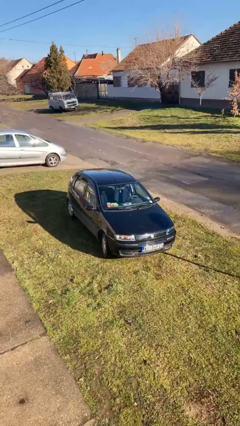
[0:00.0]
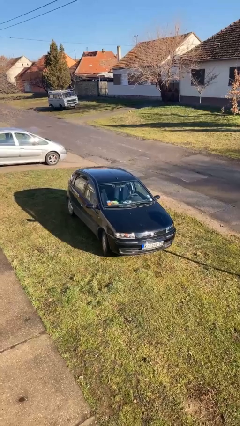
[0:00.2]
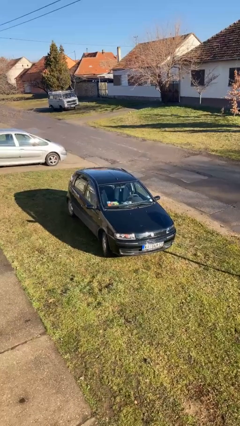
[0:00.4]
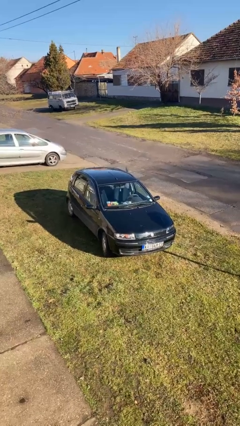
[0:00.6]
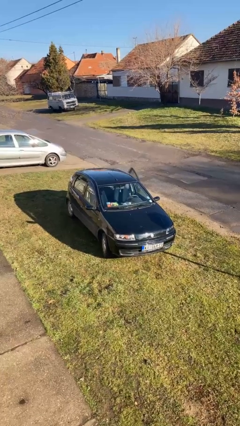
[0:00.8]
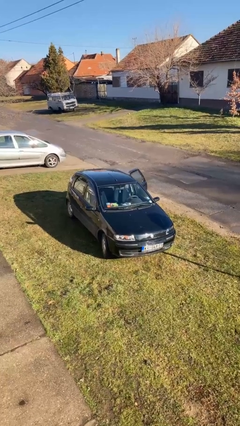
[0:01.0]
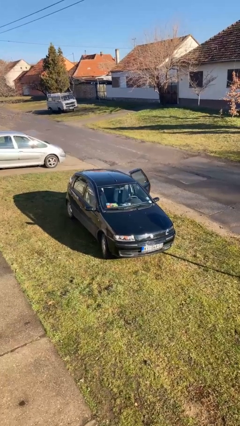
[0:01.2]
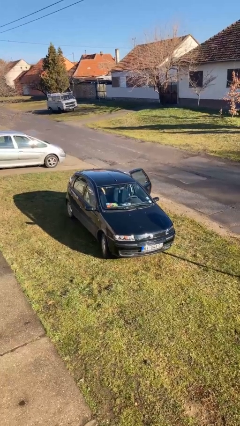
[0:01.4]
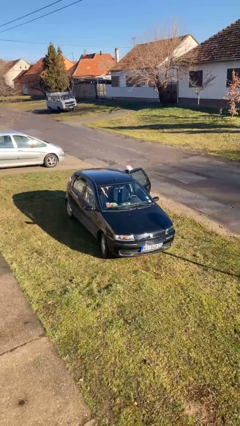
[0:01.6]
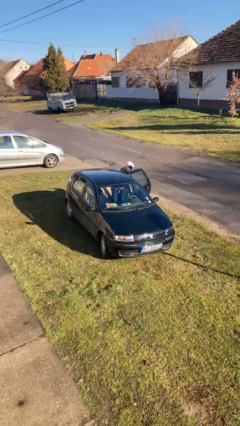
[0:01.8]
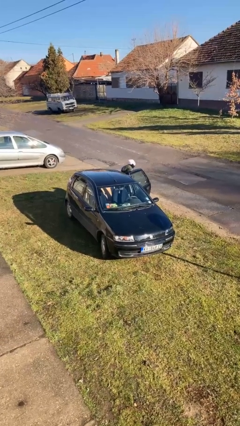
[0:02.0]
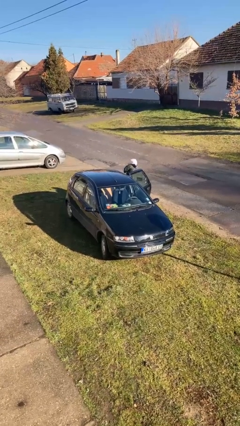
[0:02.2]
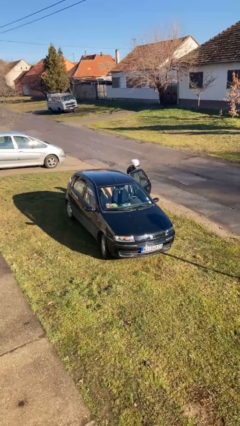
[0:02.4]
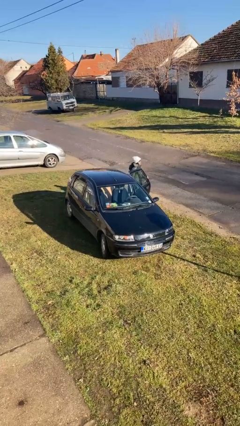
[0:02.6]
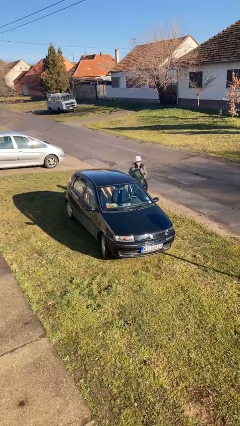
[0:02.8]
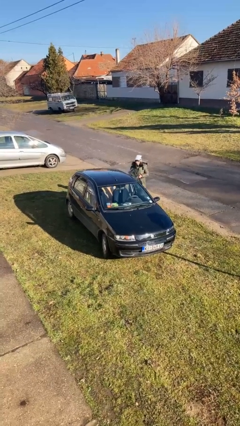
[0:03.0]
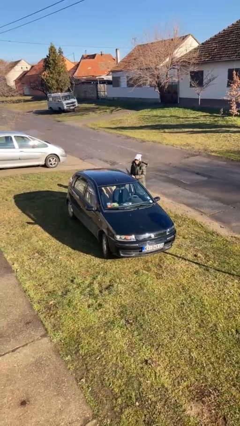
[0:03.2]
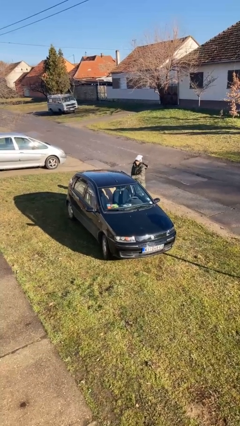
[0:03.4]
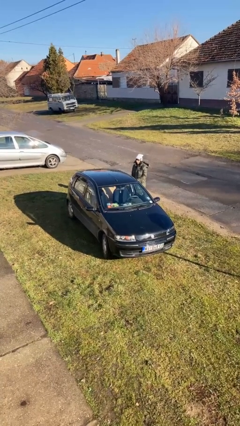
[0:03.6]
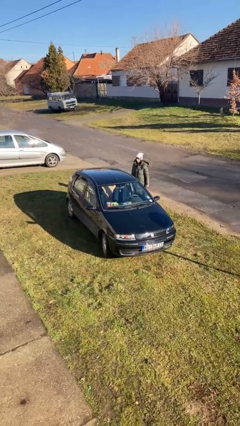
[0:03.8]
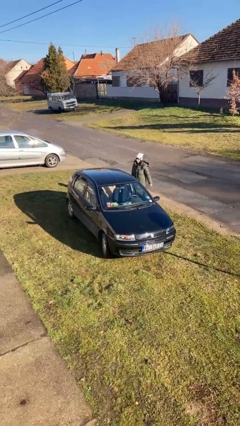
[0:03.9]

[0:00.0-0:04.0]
car drops off person

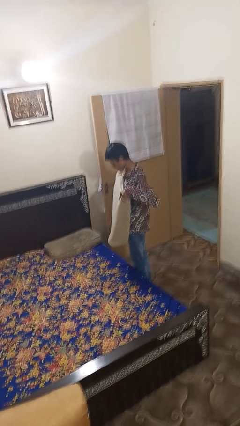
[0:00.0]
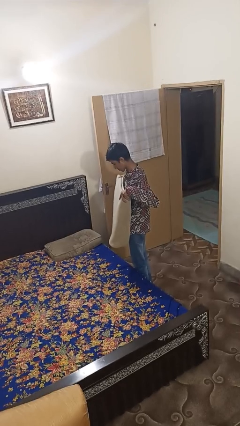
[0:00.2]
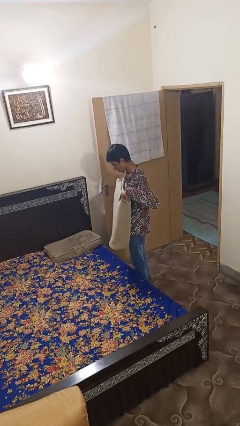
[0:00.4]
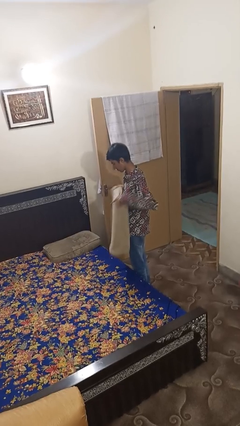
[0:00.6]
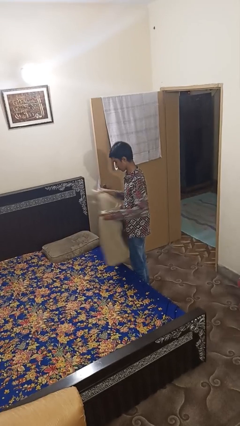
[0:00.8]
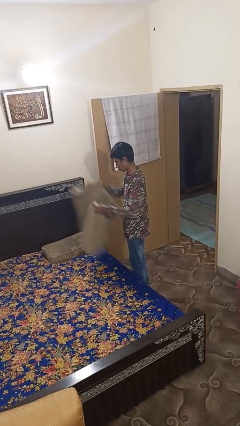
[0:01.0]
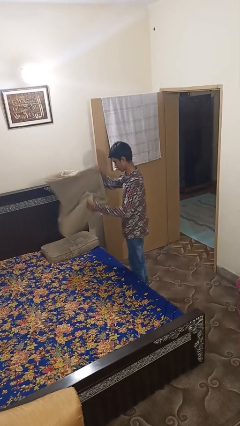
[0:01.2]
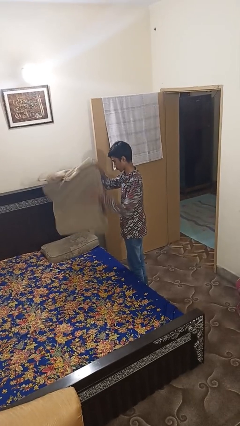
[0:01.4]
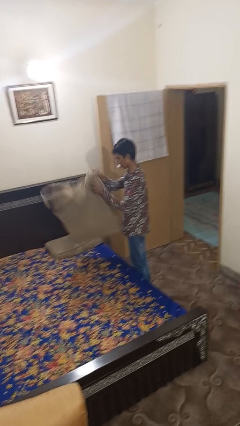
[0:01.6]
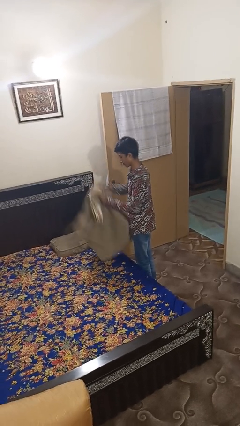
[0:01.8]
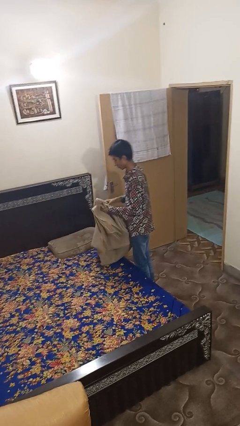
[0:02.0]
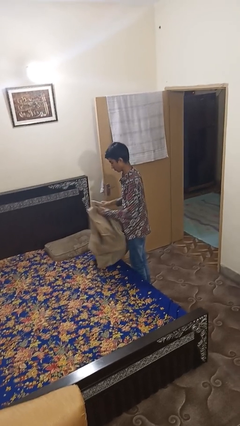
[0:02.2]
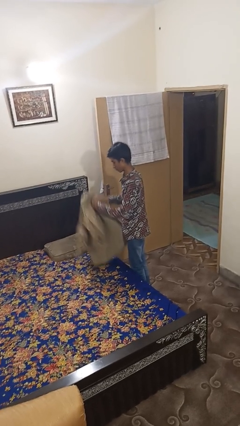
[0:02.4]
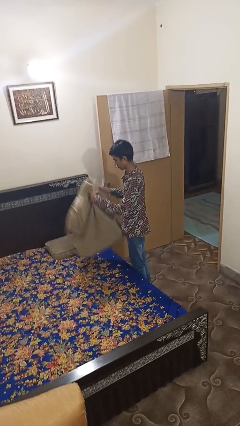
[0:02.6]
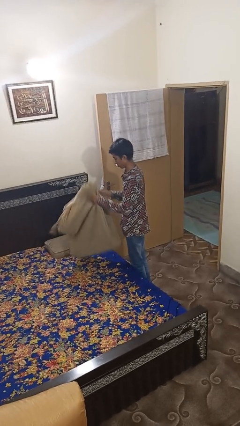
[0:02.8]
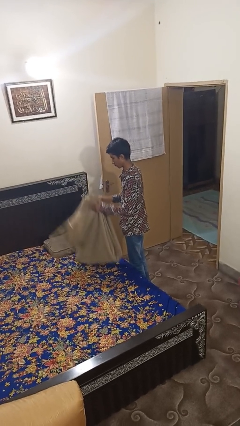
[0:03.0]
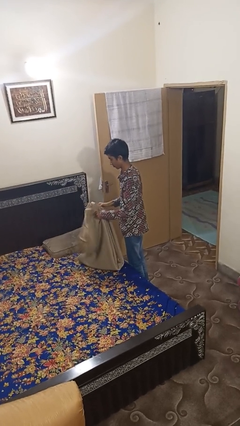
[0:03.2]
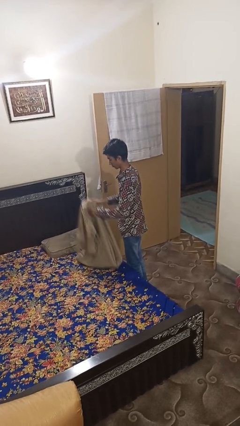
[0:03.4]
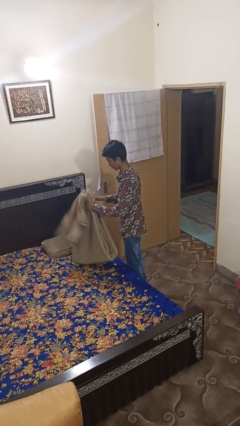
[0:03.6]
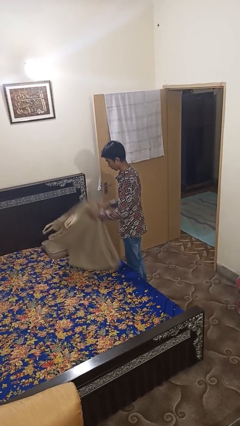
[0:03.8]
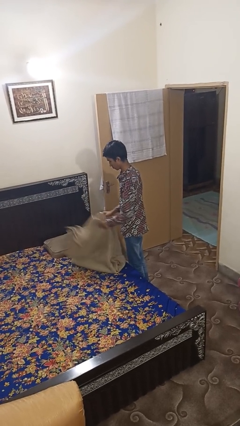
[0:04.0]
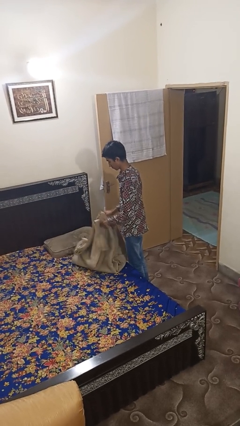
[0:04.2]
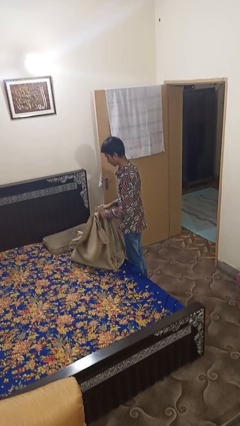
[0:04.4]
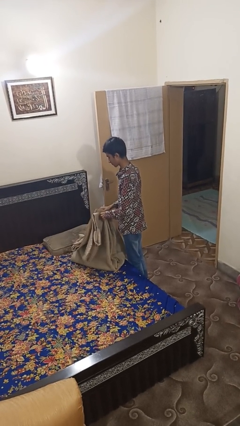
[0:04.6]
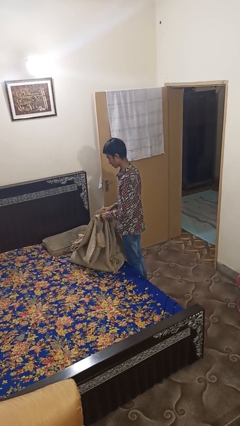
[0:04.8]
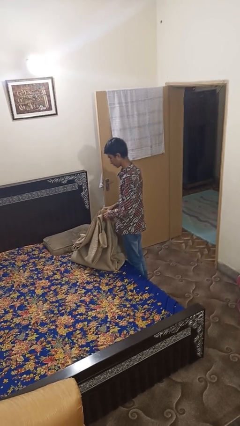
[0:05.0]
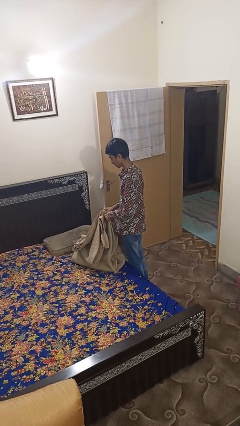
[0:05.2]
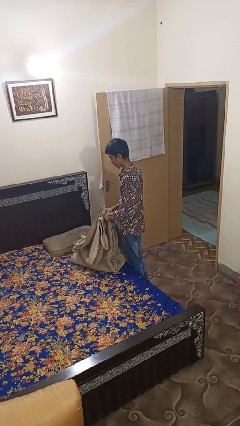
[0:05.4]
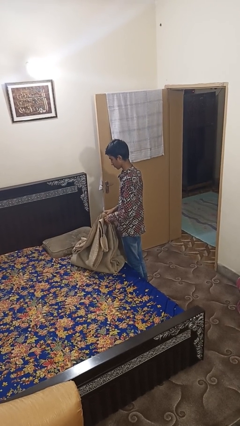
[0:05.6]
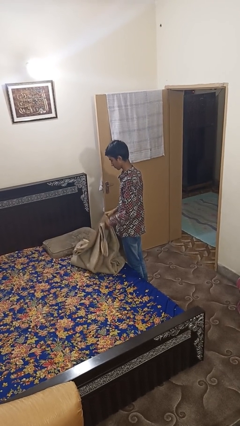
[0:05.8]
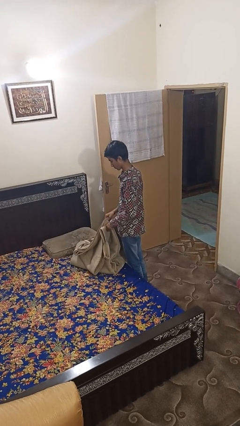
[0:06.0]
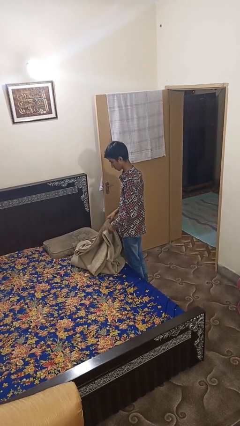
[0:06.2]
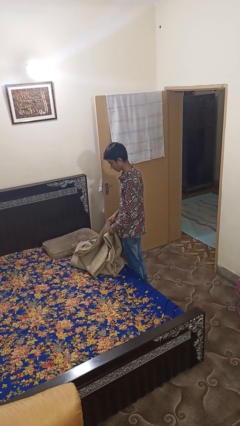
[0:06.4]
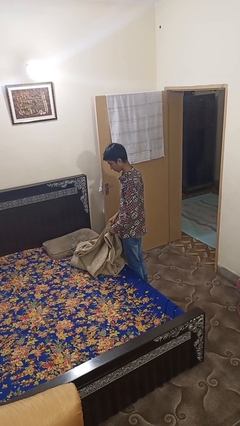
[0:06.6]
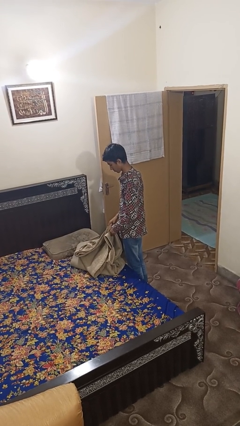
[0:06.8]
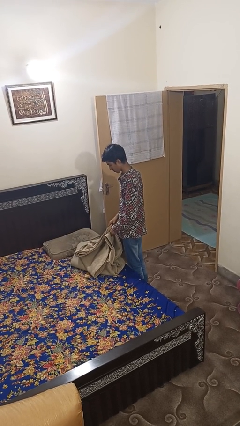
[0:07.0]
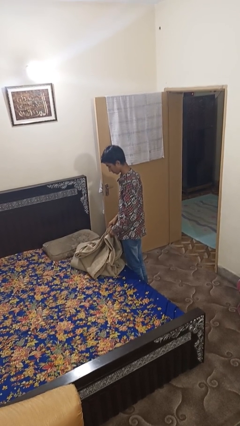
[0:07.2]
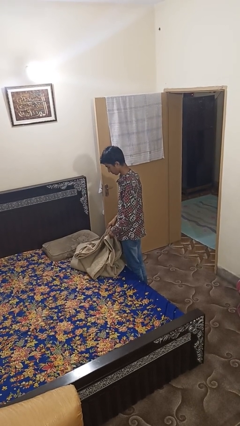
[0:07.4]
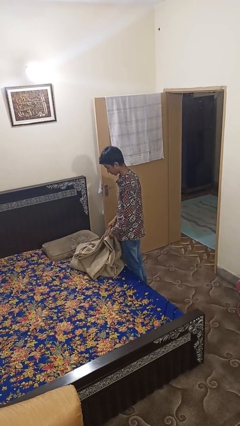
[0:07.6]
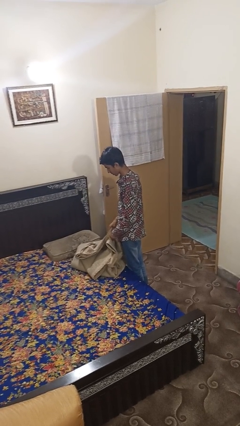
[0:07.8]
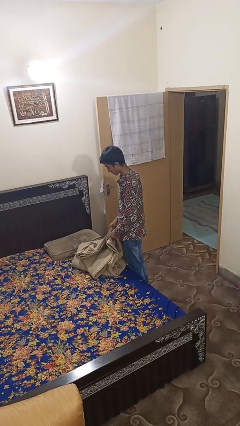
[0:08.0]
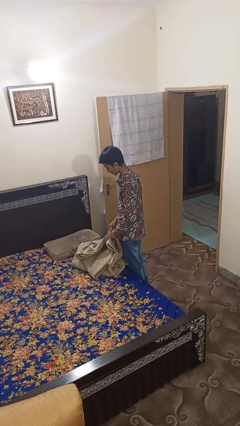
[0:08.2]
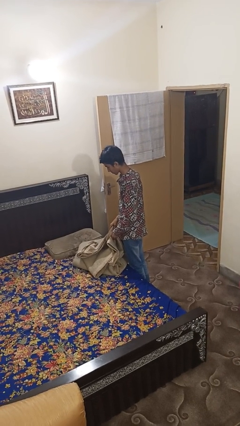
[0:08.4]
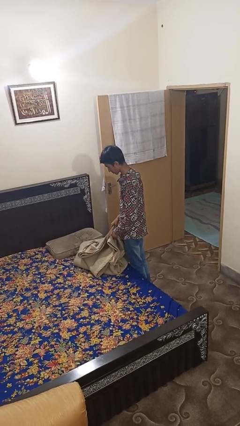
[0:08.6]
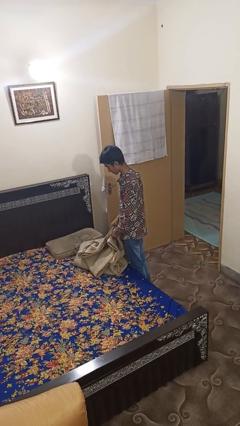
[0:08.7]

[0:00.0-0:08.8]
person unfolds blanket

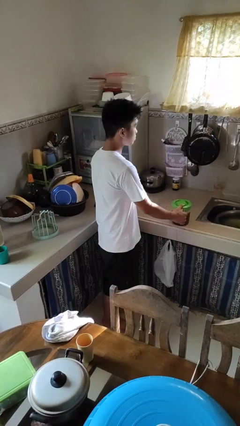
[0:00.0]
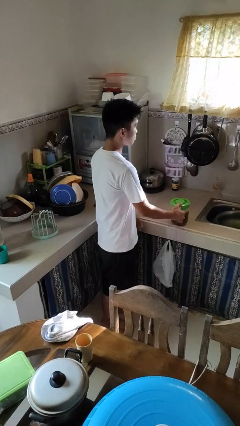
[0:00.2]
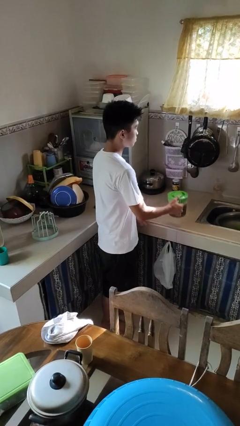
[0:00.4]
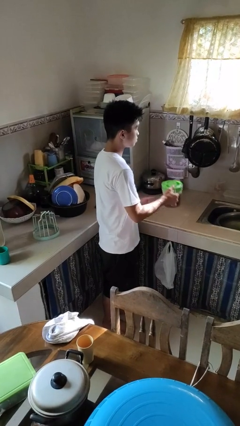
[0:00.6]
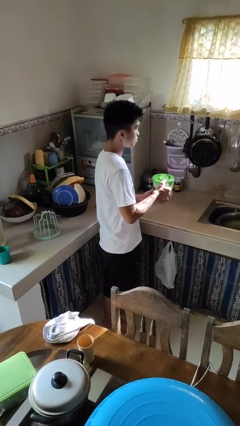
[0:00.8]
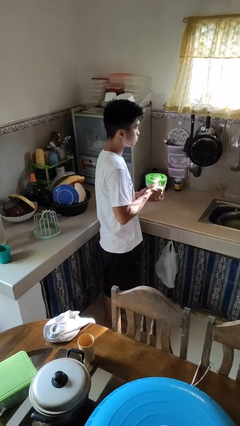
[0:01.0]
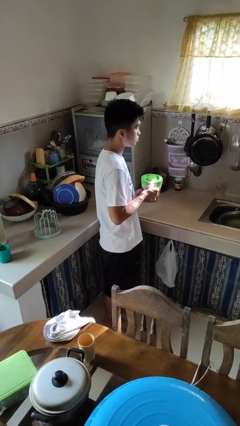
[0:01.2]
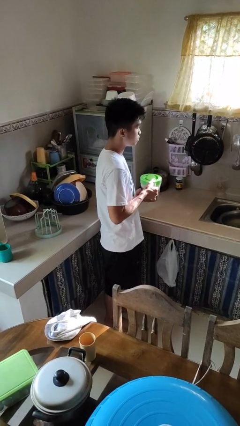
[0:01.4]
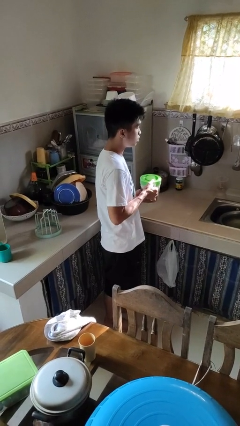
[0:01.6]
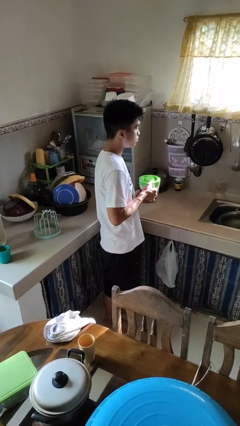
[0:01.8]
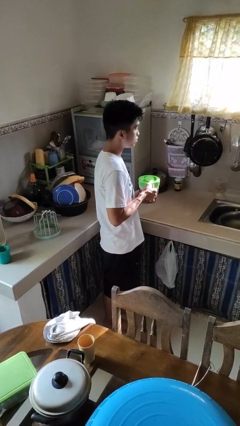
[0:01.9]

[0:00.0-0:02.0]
person picks up object from countertop

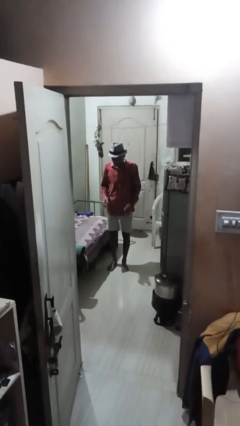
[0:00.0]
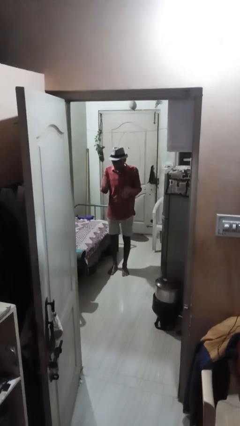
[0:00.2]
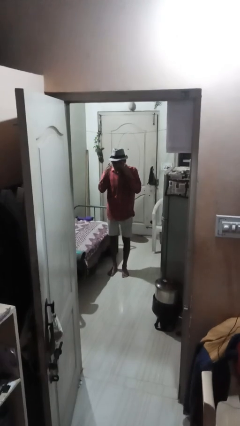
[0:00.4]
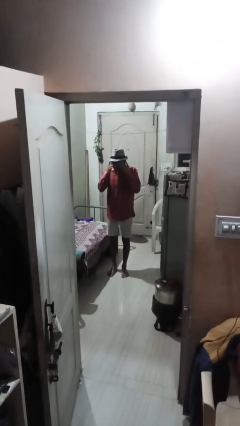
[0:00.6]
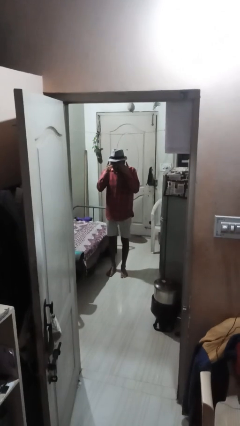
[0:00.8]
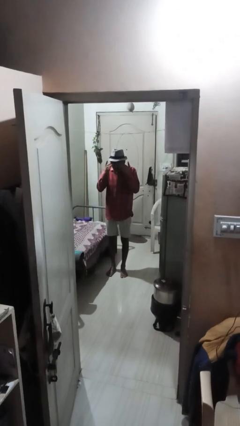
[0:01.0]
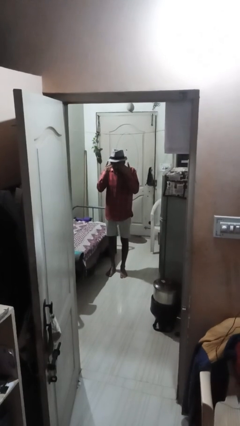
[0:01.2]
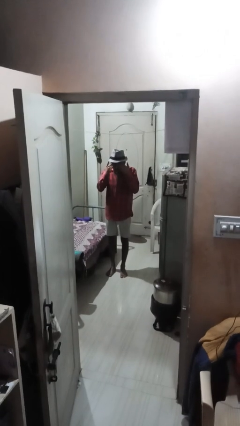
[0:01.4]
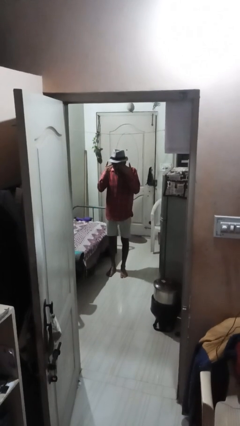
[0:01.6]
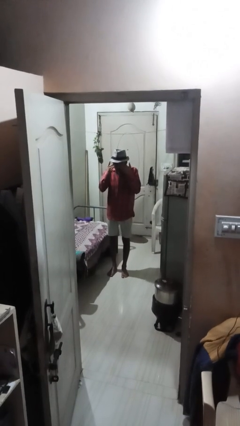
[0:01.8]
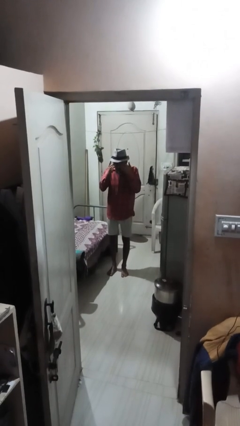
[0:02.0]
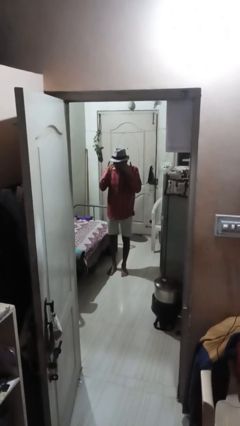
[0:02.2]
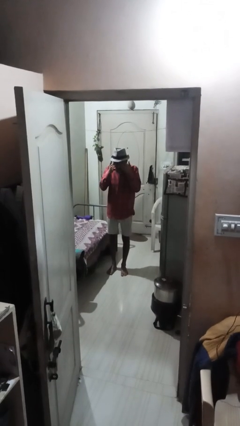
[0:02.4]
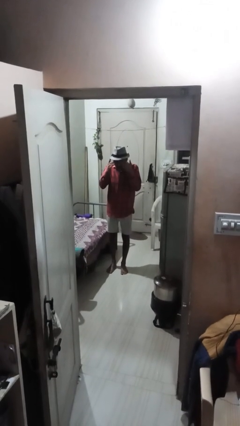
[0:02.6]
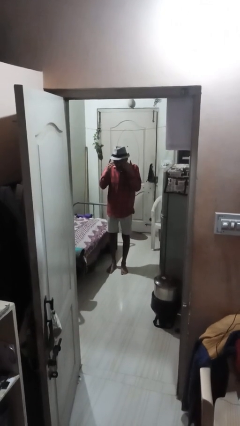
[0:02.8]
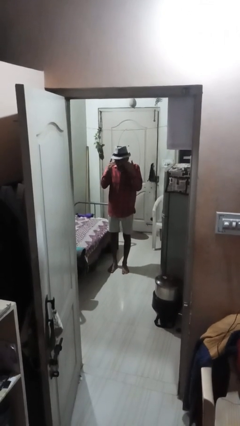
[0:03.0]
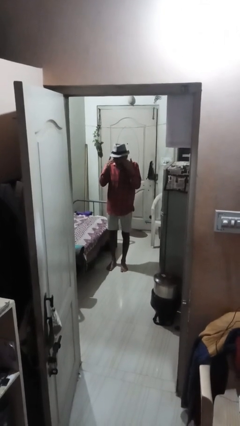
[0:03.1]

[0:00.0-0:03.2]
person rubs eyes
